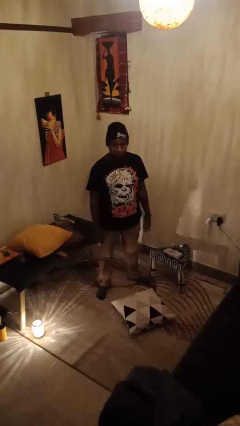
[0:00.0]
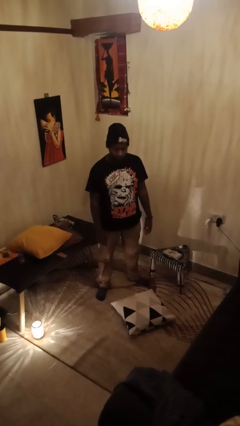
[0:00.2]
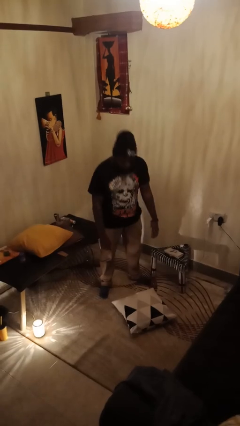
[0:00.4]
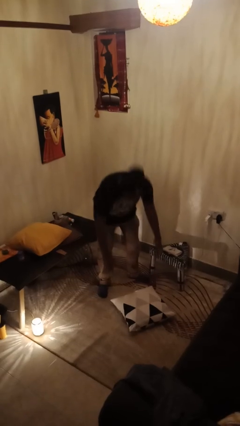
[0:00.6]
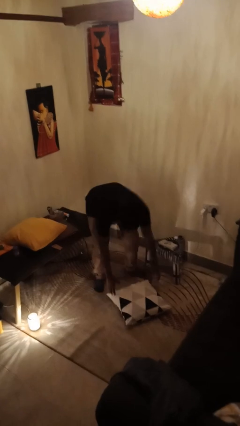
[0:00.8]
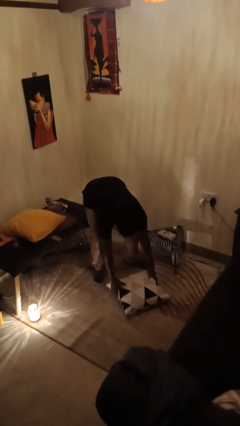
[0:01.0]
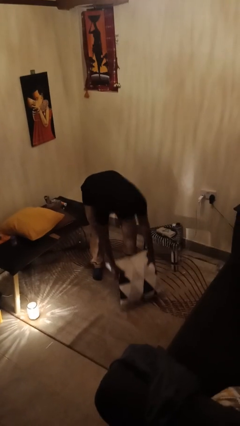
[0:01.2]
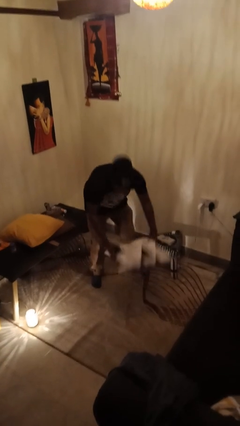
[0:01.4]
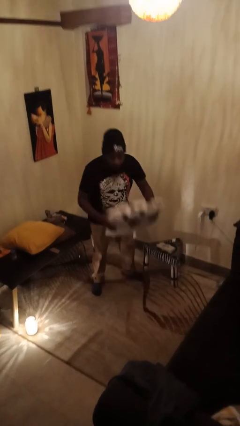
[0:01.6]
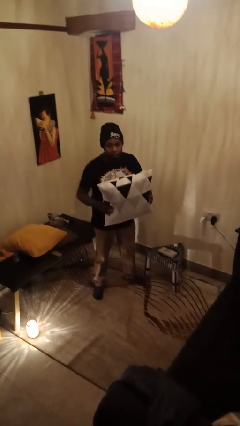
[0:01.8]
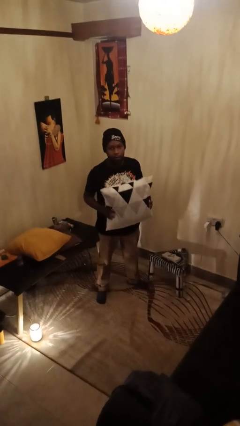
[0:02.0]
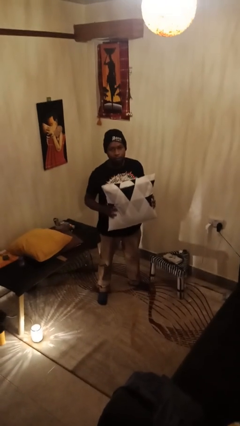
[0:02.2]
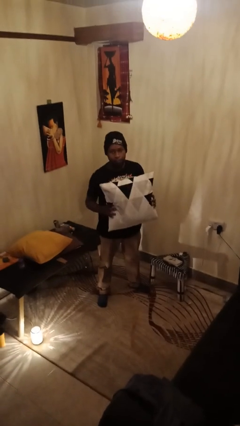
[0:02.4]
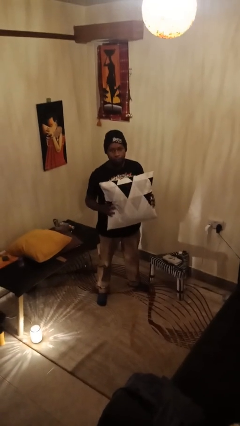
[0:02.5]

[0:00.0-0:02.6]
person picks up object from floor

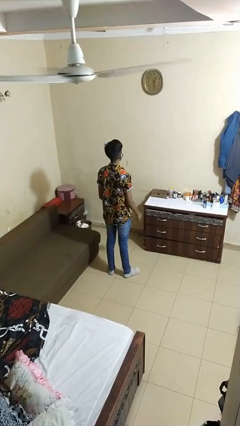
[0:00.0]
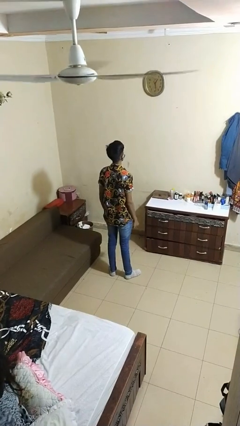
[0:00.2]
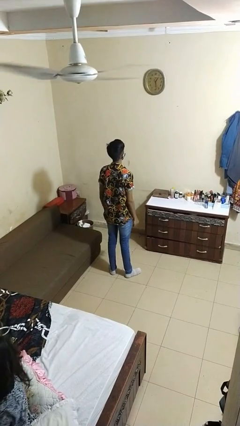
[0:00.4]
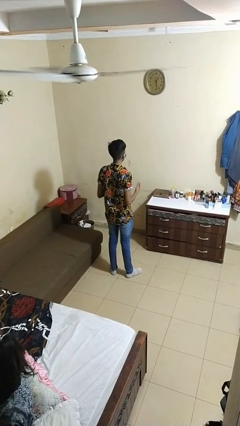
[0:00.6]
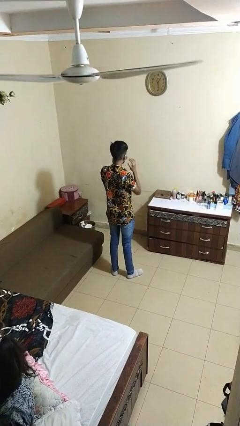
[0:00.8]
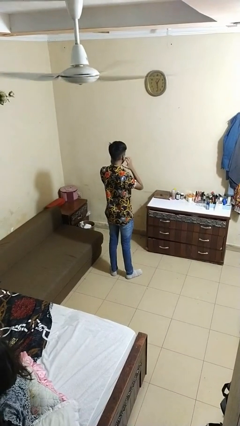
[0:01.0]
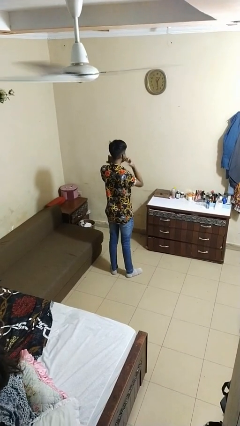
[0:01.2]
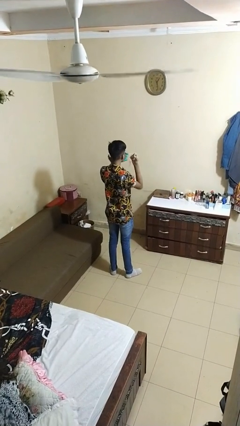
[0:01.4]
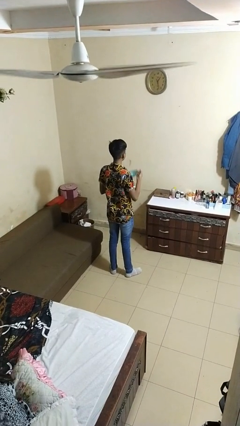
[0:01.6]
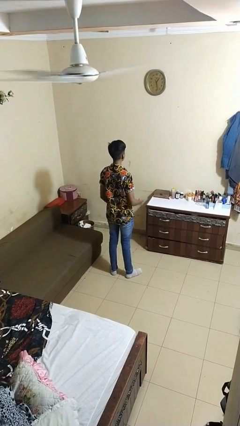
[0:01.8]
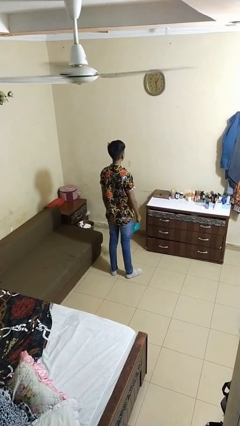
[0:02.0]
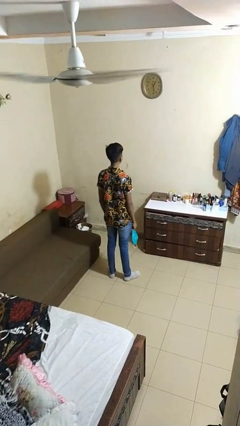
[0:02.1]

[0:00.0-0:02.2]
person takes off facemask

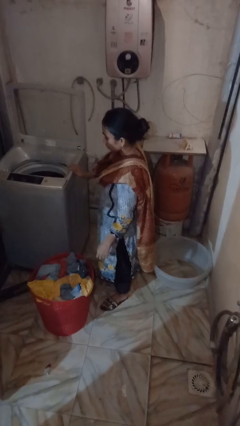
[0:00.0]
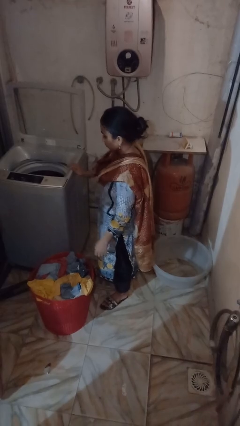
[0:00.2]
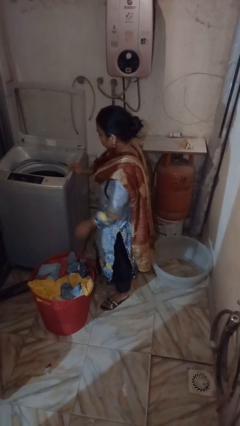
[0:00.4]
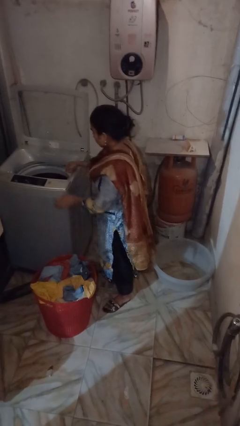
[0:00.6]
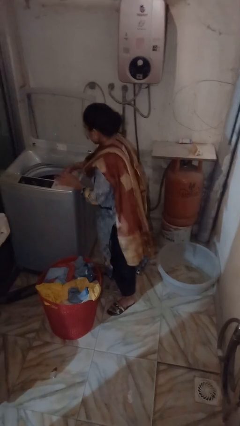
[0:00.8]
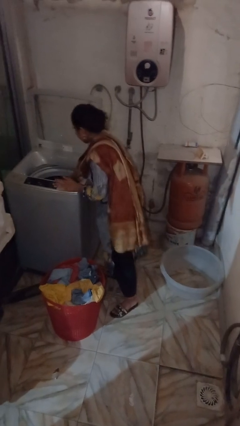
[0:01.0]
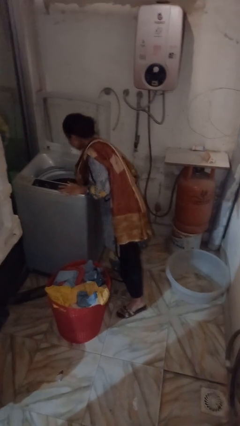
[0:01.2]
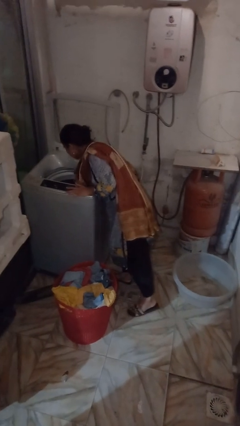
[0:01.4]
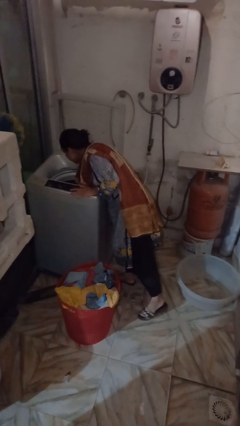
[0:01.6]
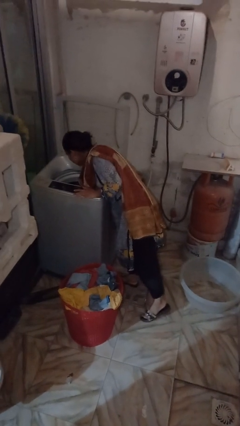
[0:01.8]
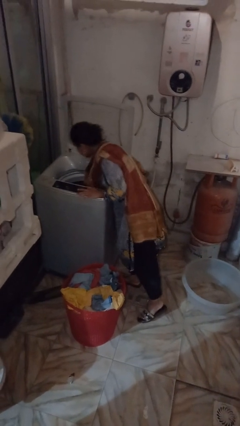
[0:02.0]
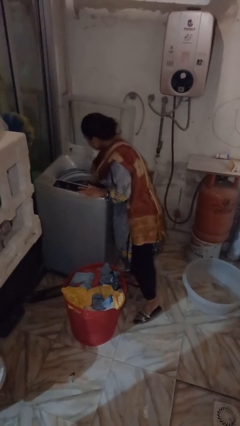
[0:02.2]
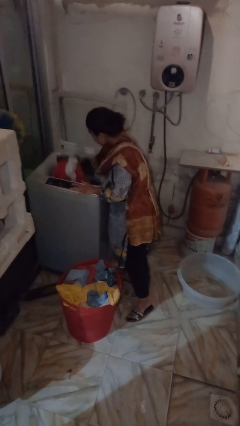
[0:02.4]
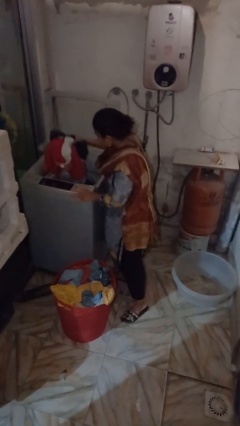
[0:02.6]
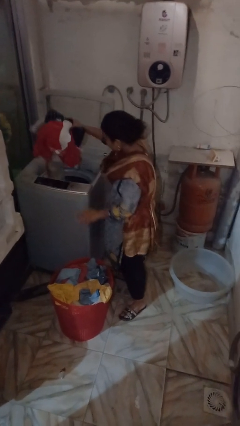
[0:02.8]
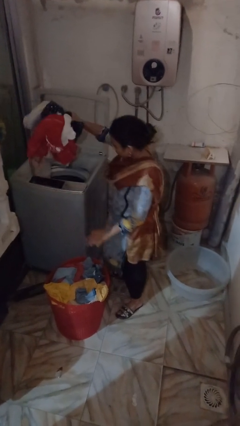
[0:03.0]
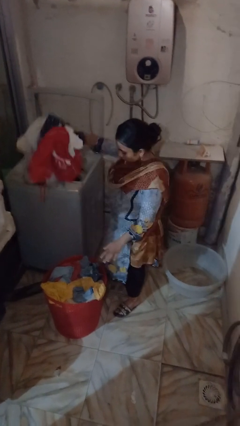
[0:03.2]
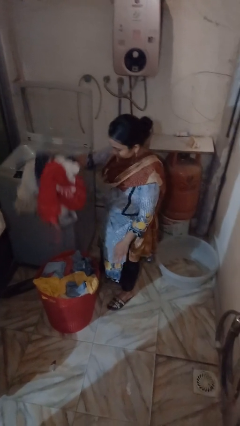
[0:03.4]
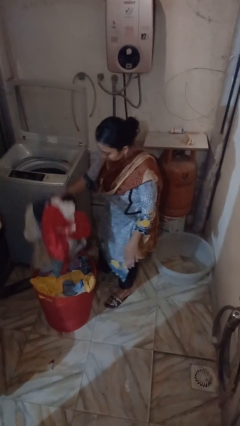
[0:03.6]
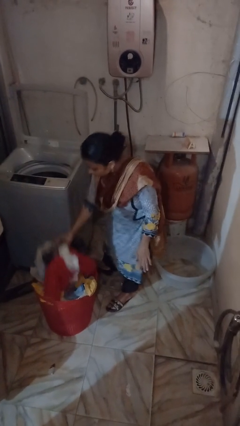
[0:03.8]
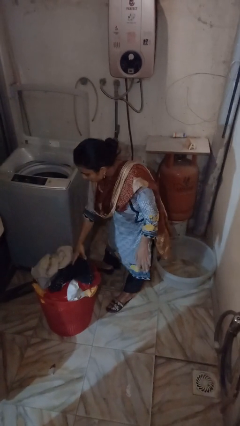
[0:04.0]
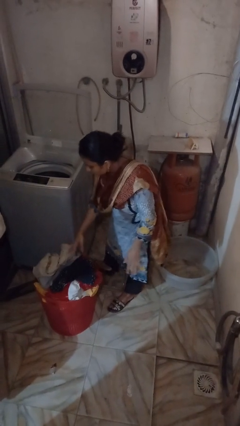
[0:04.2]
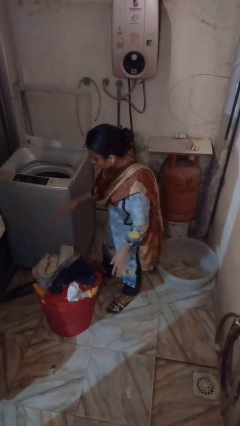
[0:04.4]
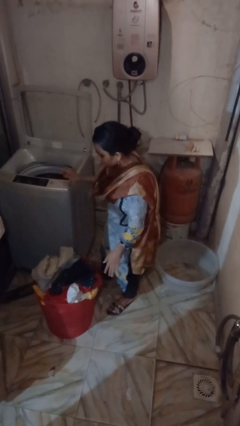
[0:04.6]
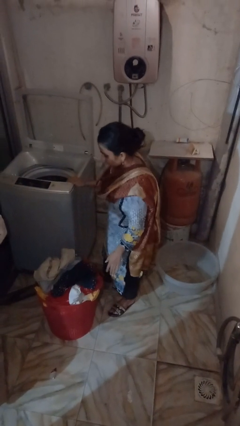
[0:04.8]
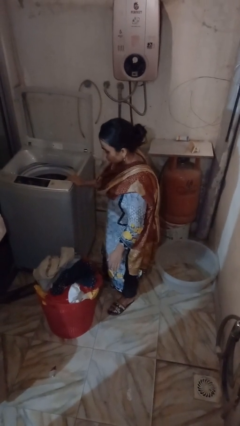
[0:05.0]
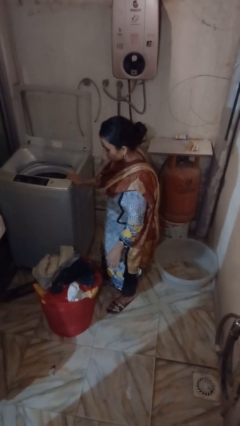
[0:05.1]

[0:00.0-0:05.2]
person unloads dryer

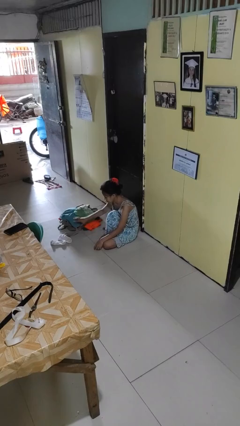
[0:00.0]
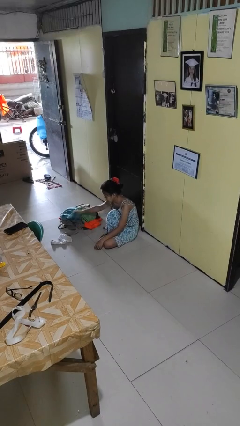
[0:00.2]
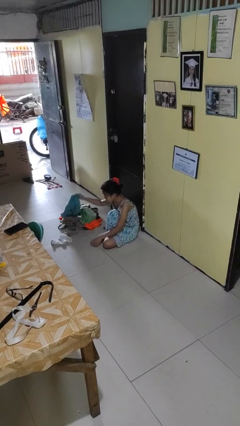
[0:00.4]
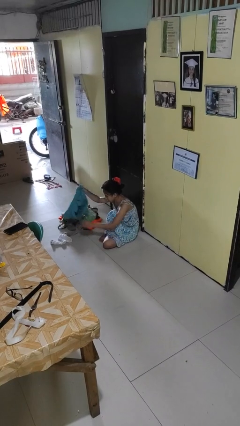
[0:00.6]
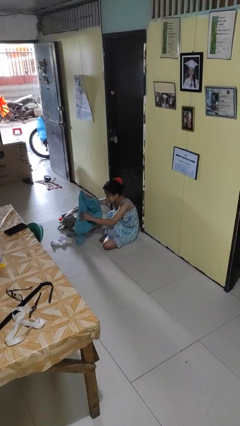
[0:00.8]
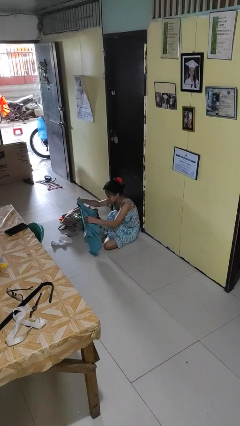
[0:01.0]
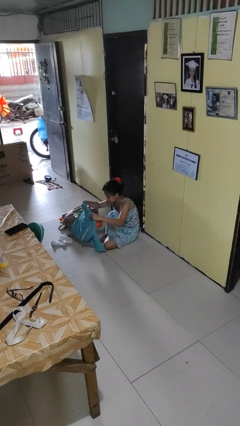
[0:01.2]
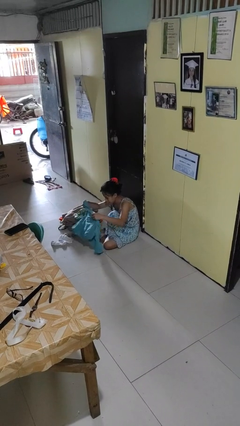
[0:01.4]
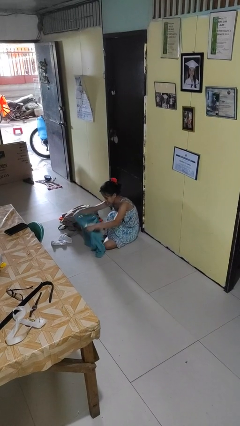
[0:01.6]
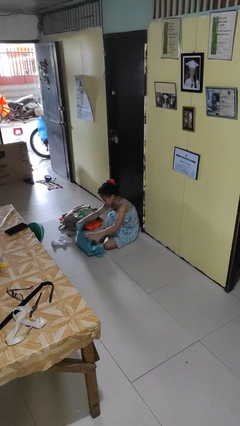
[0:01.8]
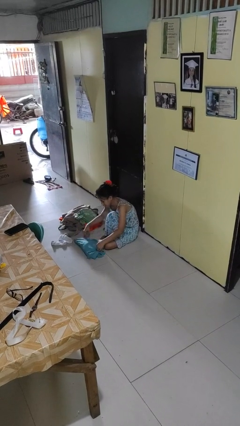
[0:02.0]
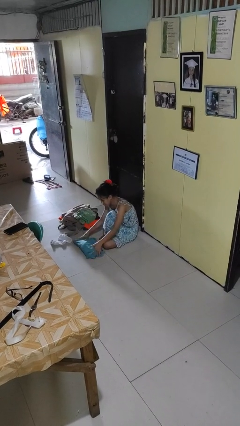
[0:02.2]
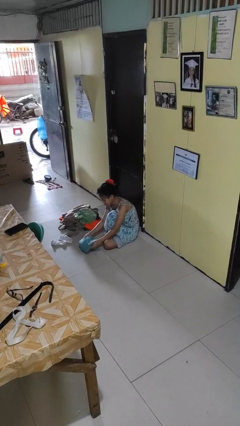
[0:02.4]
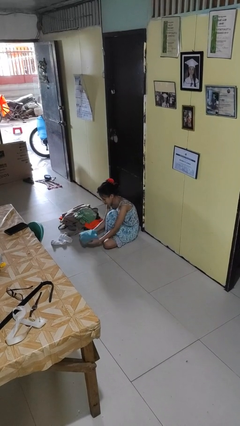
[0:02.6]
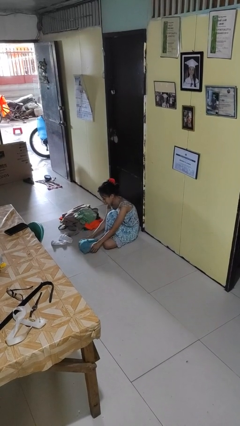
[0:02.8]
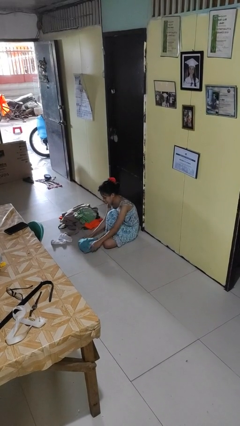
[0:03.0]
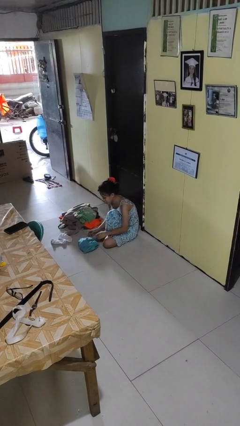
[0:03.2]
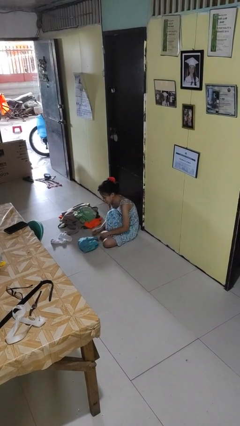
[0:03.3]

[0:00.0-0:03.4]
person folds shirt

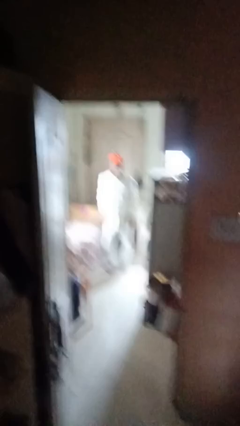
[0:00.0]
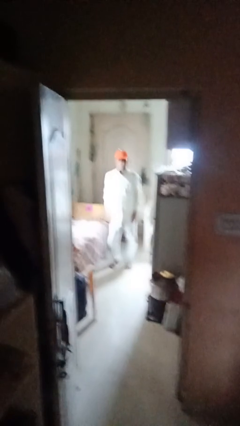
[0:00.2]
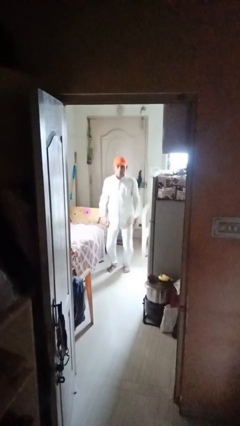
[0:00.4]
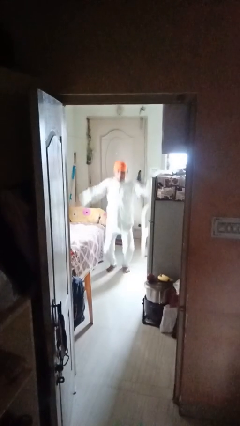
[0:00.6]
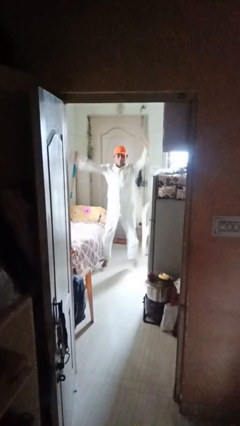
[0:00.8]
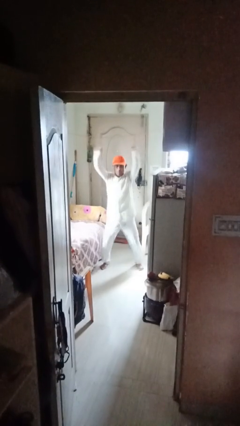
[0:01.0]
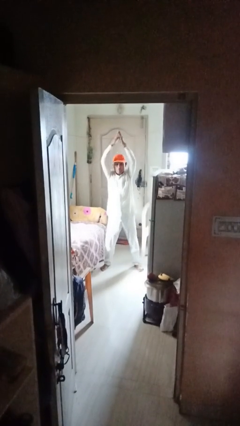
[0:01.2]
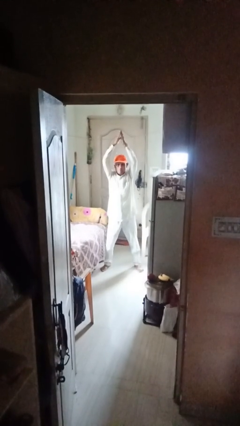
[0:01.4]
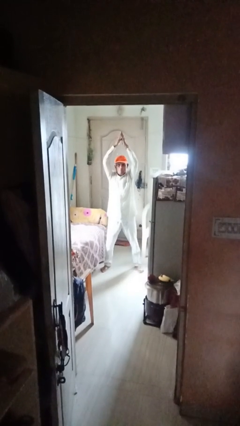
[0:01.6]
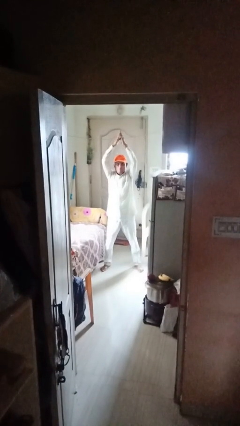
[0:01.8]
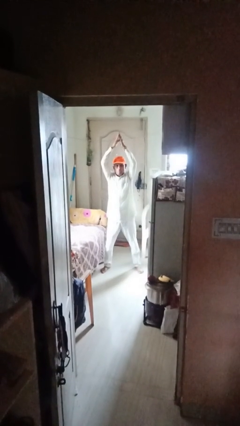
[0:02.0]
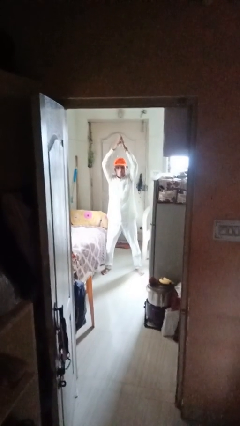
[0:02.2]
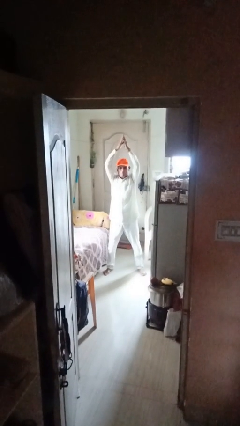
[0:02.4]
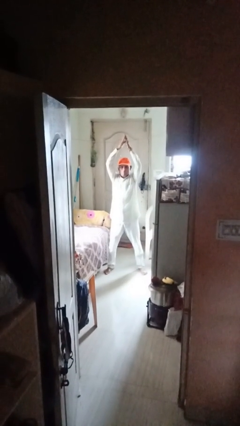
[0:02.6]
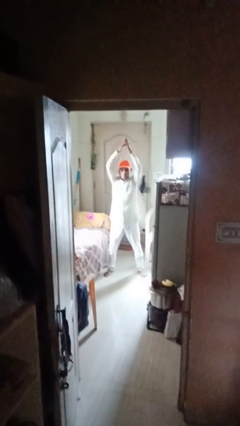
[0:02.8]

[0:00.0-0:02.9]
person exercises with jumping jacks

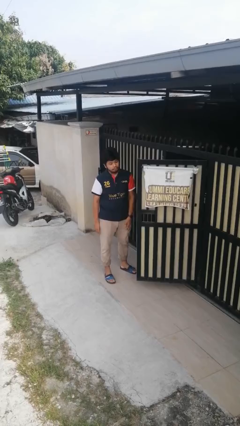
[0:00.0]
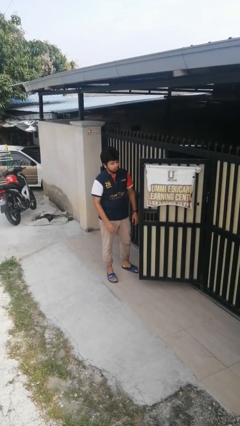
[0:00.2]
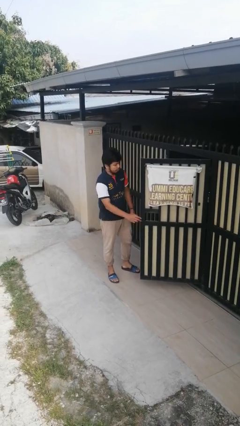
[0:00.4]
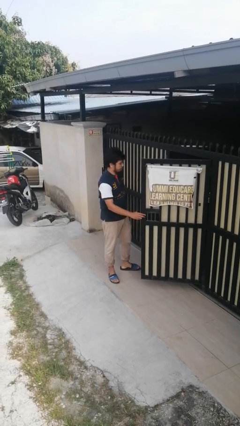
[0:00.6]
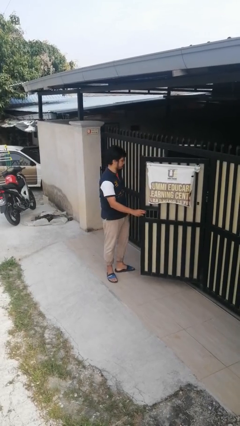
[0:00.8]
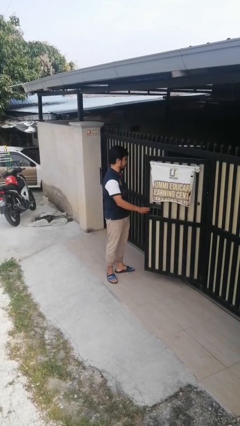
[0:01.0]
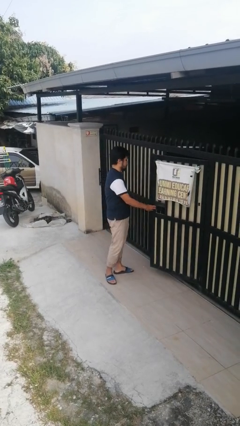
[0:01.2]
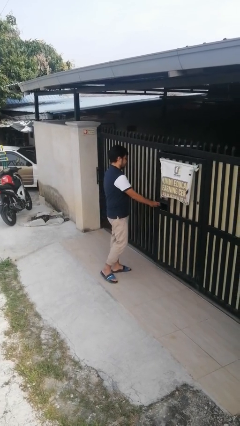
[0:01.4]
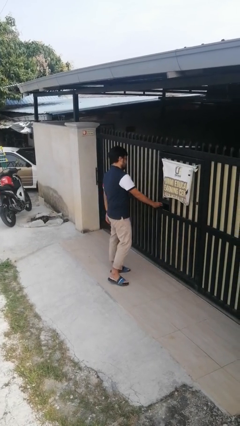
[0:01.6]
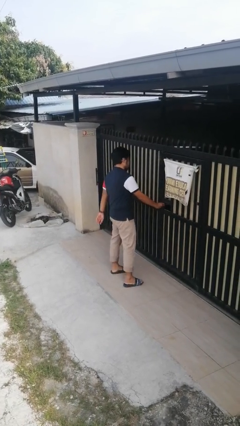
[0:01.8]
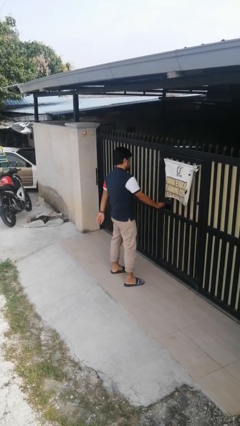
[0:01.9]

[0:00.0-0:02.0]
person closes gate
